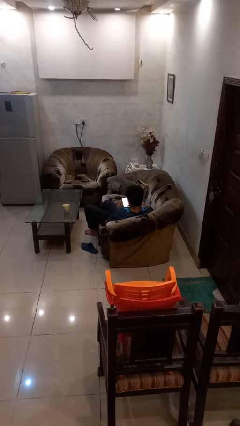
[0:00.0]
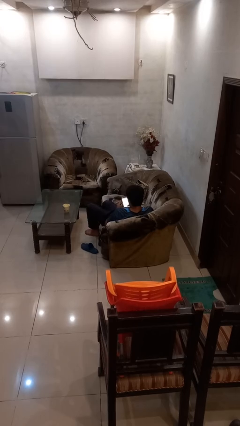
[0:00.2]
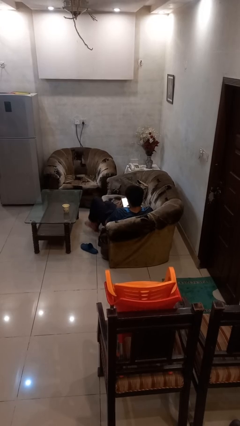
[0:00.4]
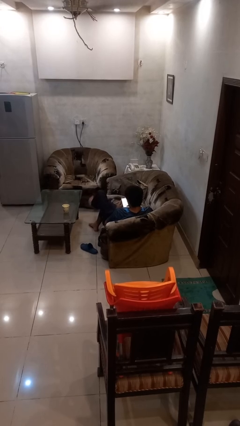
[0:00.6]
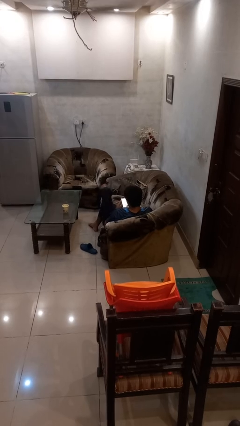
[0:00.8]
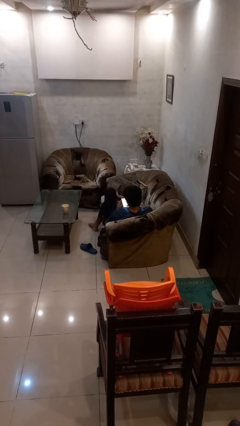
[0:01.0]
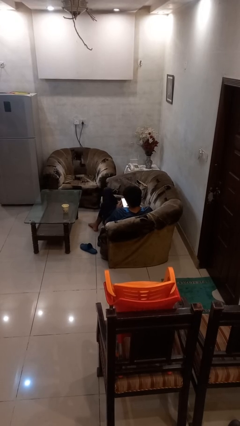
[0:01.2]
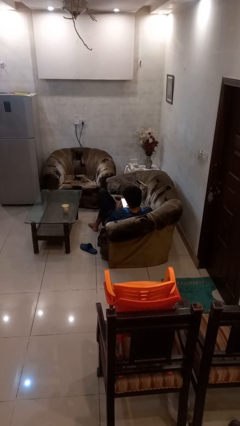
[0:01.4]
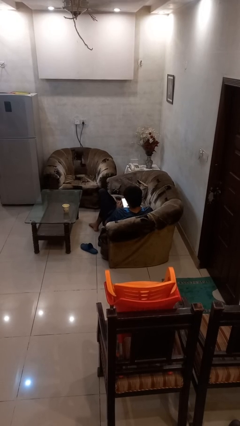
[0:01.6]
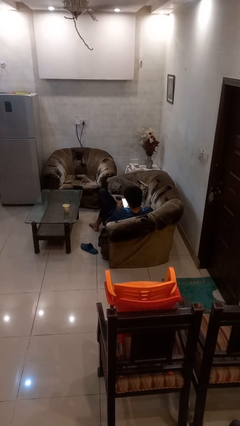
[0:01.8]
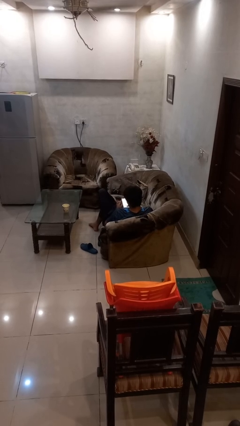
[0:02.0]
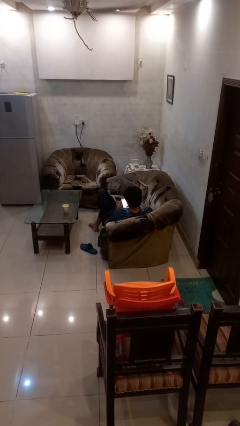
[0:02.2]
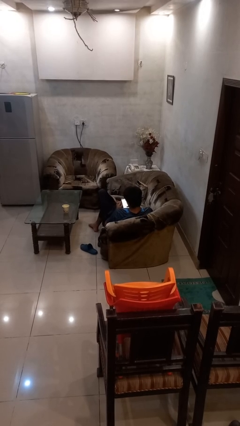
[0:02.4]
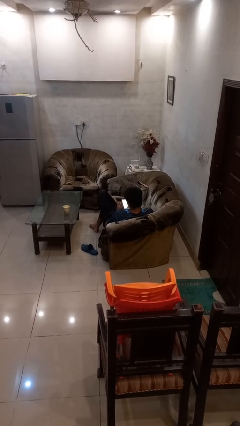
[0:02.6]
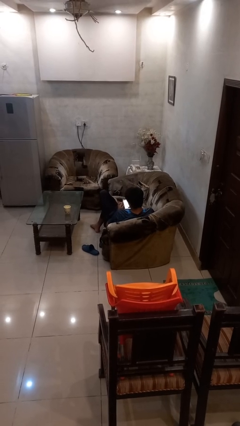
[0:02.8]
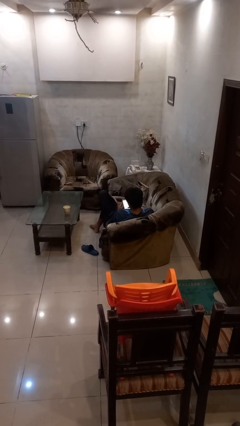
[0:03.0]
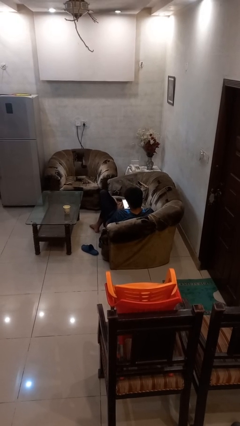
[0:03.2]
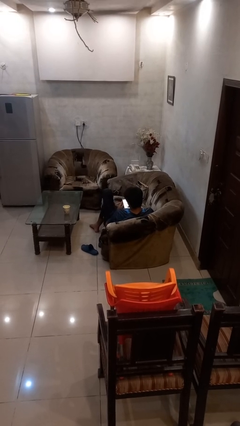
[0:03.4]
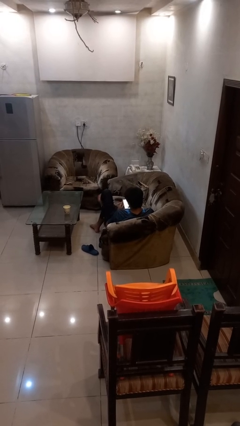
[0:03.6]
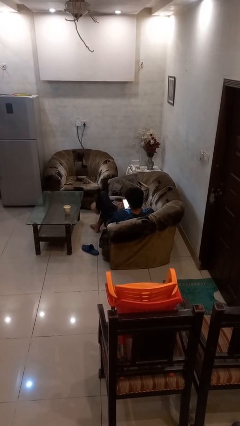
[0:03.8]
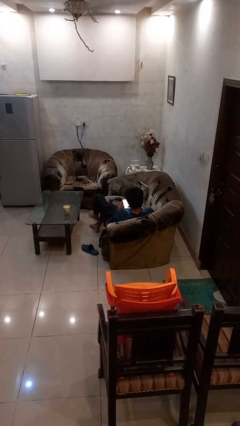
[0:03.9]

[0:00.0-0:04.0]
person crosses legs

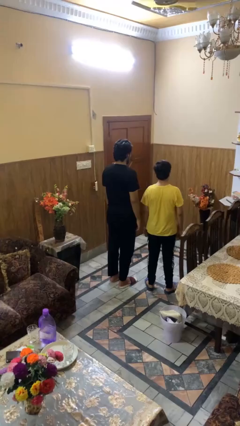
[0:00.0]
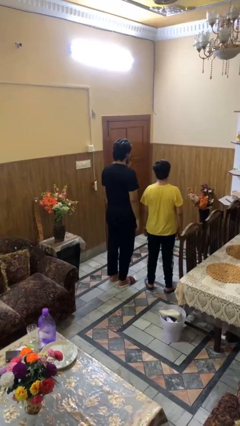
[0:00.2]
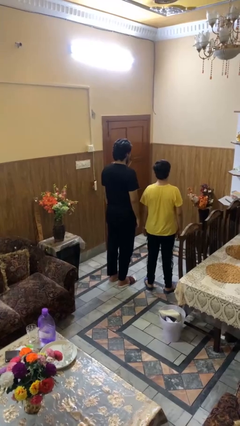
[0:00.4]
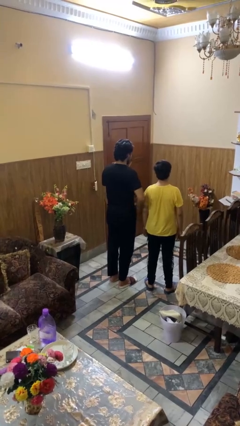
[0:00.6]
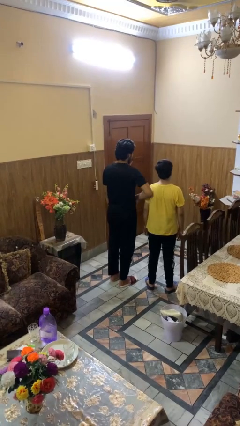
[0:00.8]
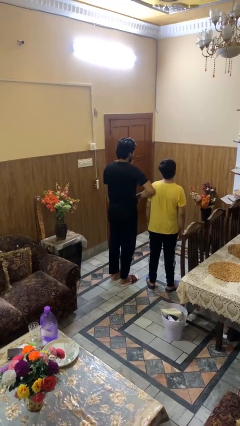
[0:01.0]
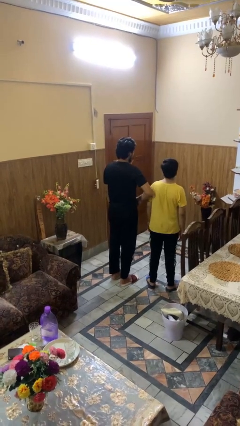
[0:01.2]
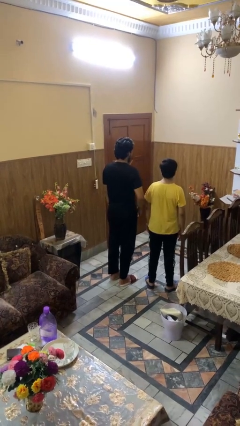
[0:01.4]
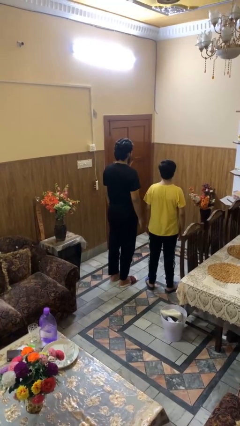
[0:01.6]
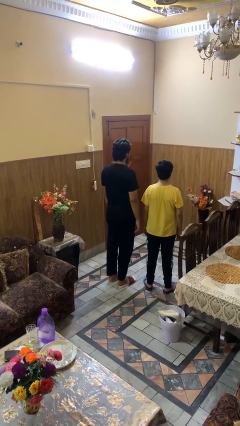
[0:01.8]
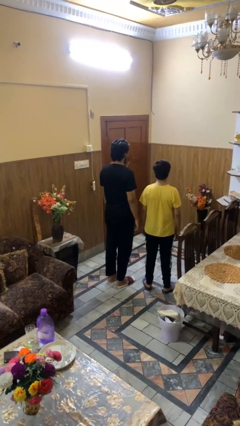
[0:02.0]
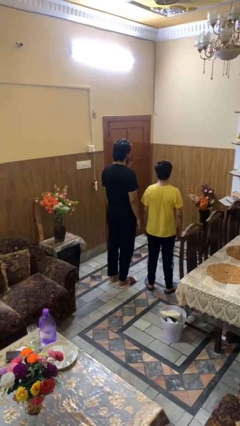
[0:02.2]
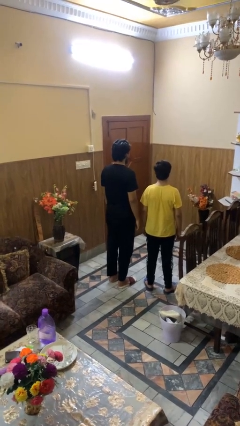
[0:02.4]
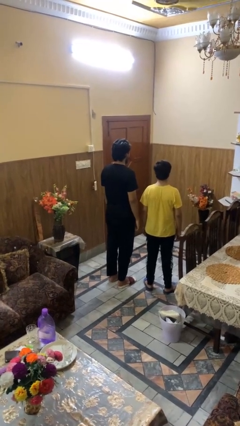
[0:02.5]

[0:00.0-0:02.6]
person nudges person with elbow

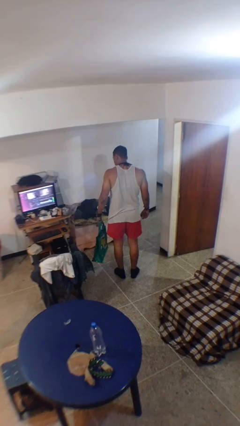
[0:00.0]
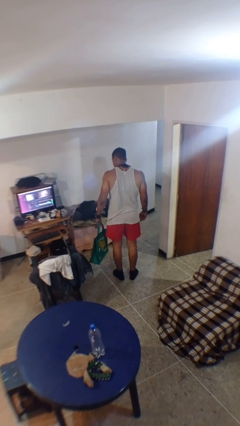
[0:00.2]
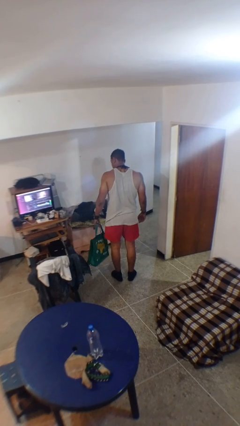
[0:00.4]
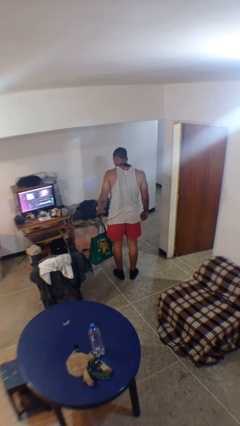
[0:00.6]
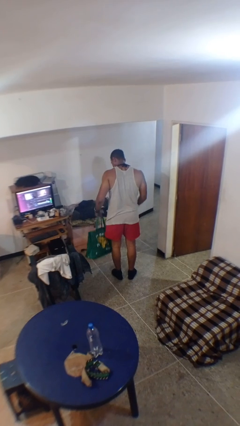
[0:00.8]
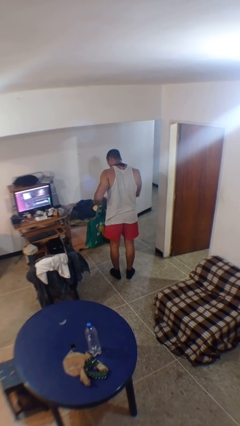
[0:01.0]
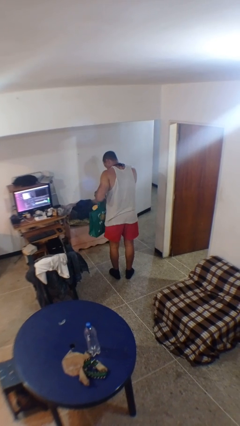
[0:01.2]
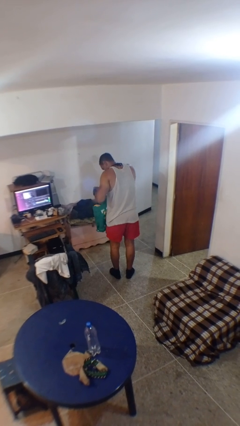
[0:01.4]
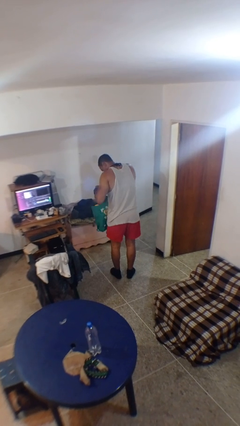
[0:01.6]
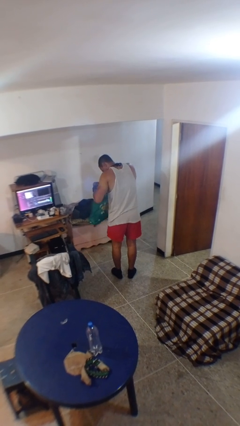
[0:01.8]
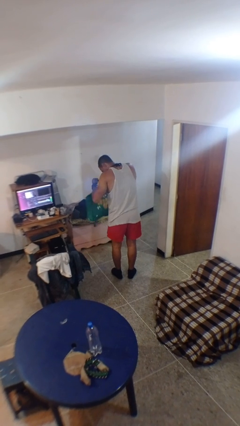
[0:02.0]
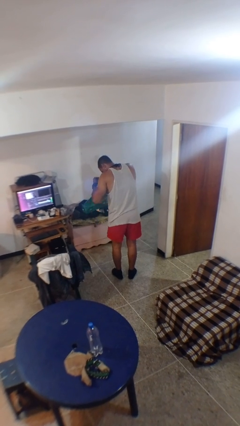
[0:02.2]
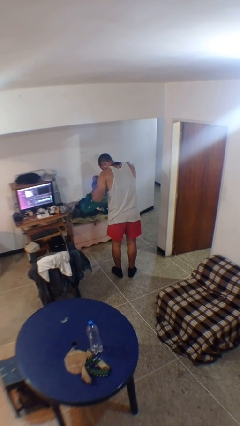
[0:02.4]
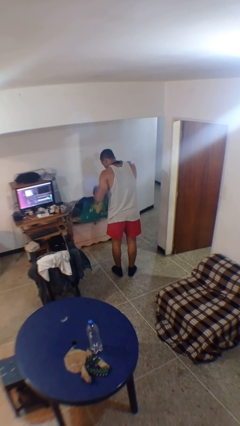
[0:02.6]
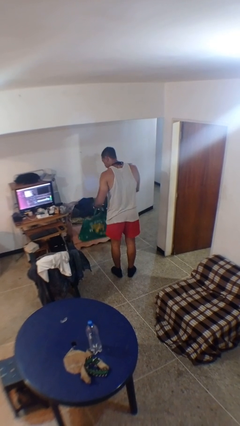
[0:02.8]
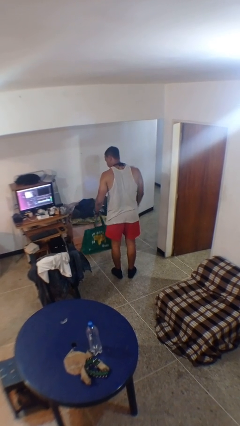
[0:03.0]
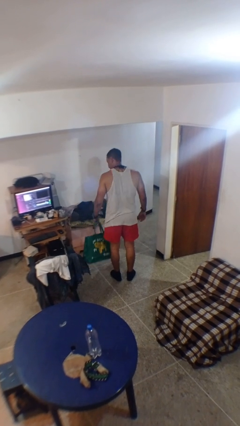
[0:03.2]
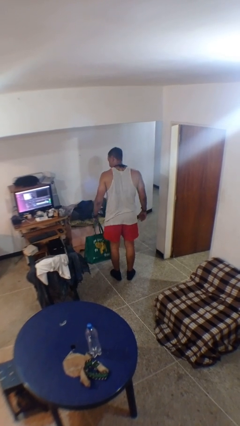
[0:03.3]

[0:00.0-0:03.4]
person searches in bag

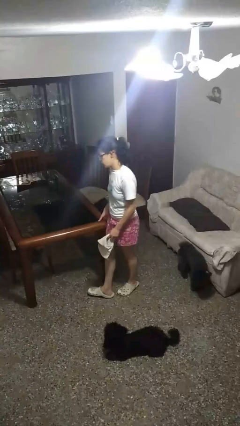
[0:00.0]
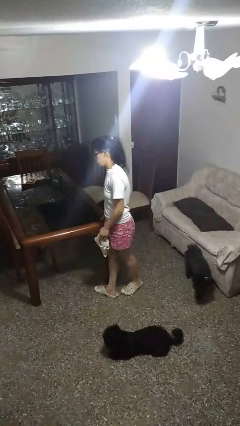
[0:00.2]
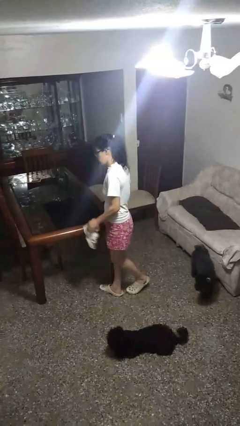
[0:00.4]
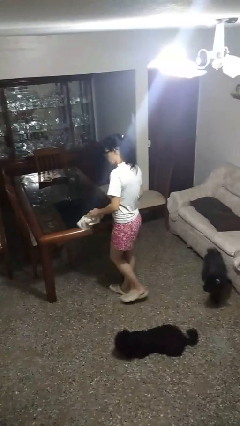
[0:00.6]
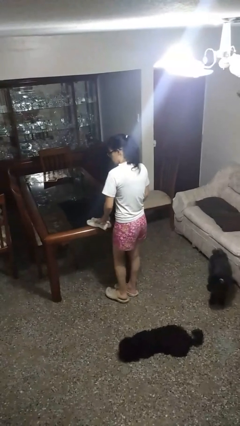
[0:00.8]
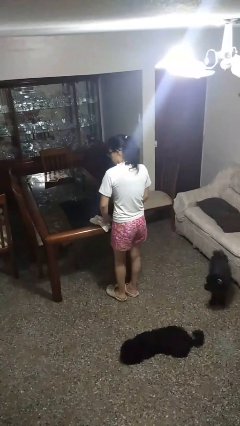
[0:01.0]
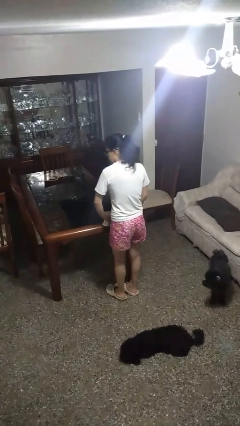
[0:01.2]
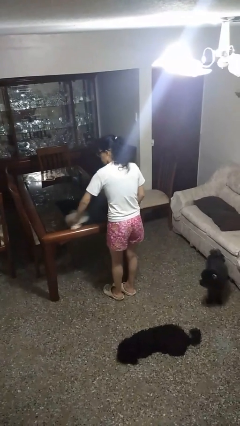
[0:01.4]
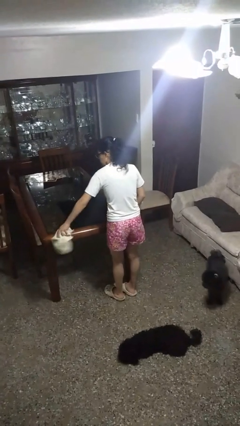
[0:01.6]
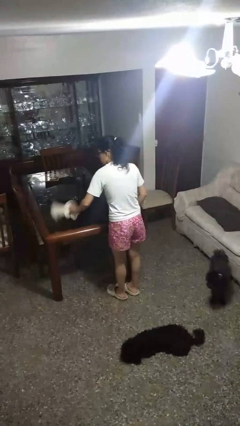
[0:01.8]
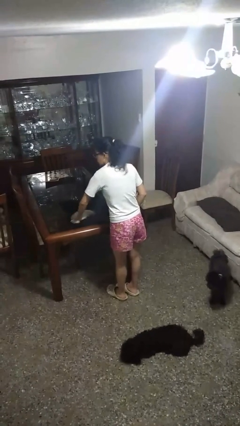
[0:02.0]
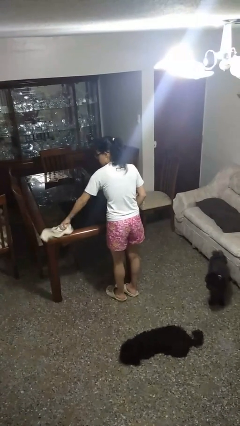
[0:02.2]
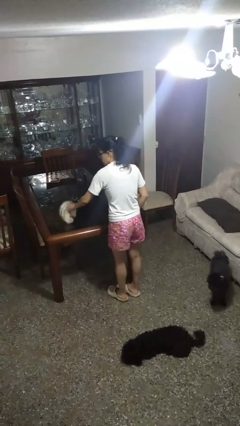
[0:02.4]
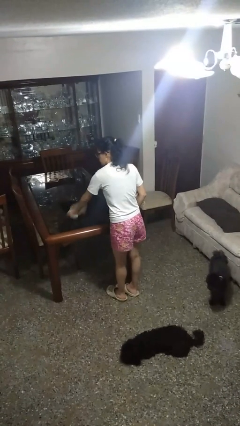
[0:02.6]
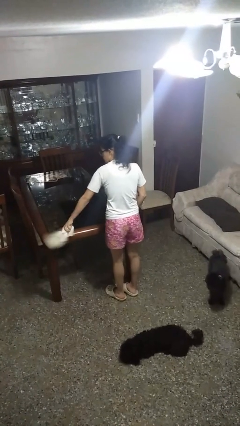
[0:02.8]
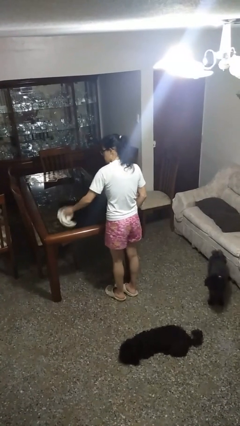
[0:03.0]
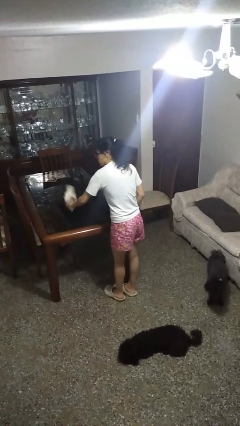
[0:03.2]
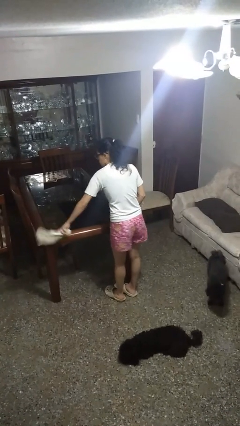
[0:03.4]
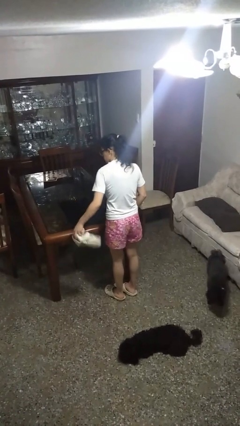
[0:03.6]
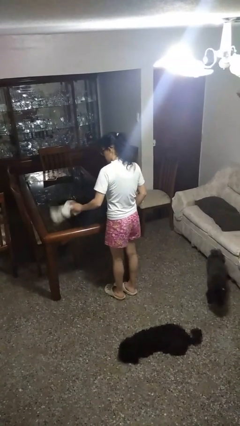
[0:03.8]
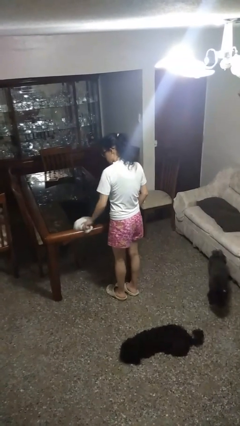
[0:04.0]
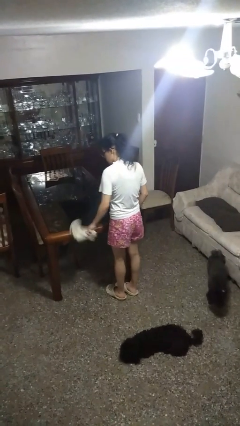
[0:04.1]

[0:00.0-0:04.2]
person cleans table with rag

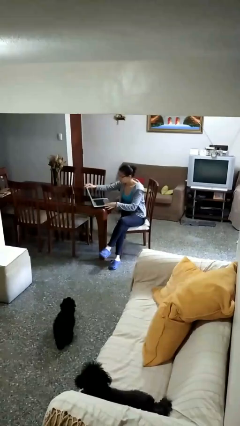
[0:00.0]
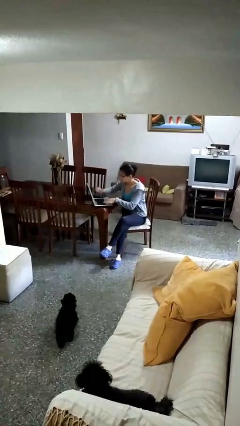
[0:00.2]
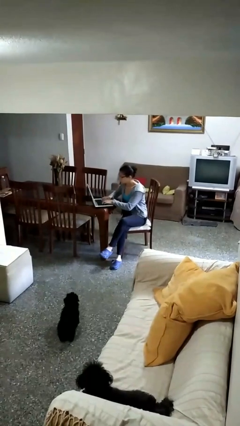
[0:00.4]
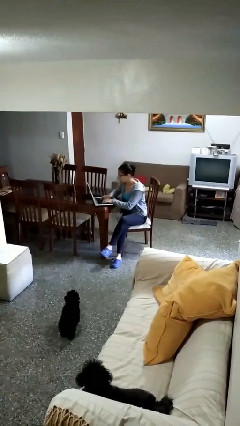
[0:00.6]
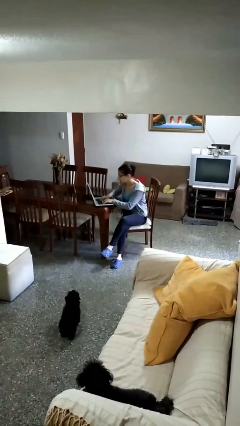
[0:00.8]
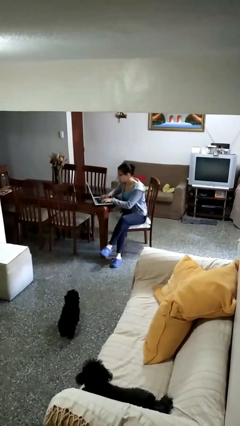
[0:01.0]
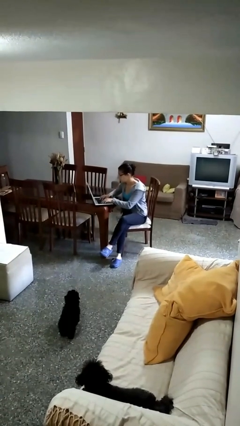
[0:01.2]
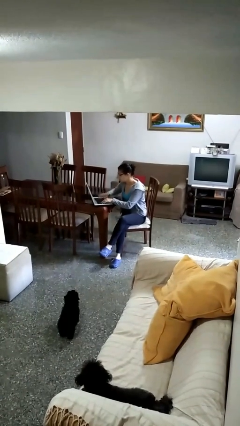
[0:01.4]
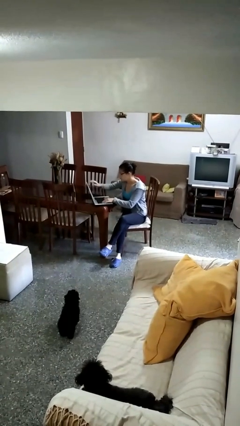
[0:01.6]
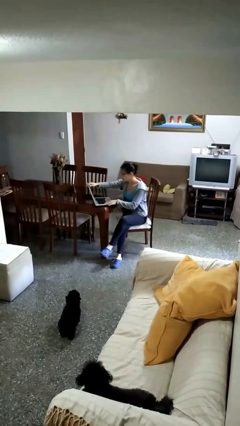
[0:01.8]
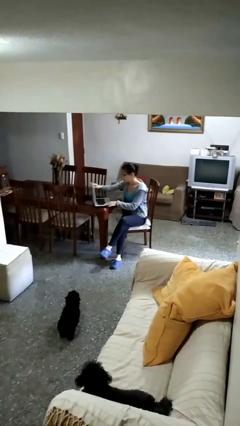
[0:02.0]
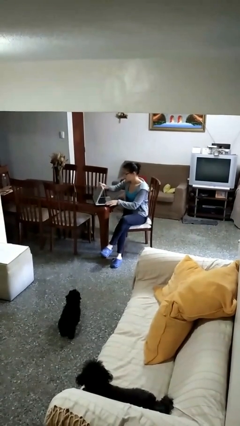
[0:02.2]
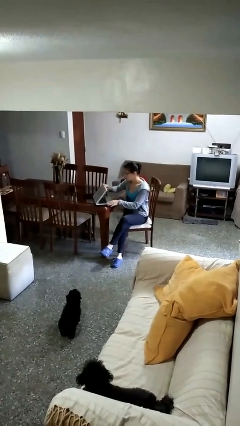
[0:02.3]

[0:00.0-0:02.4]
person interacts with laptop

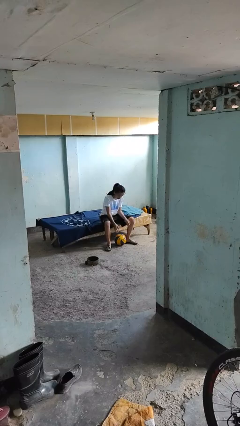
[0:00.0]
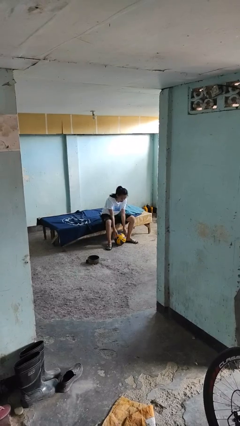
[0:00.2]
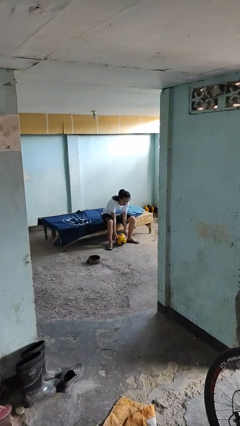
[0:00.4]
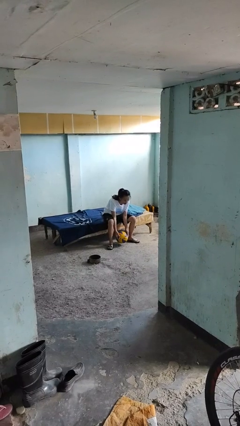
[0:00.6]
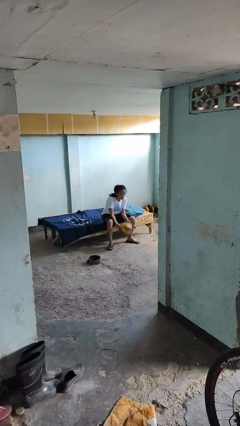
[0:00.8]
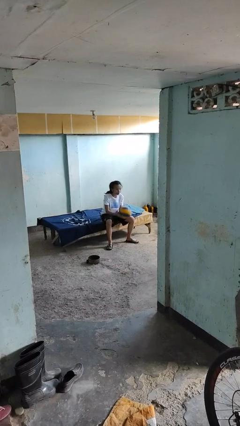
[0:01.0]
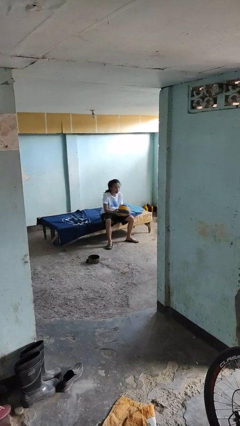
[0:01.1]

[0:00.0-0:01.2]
person picks up object from floor
